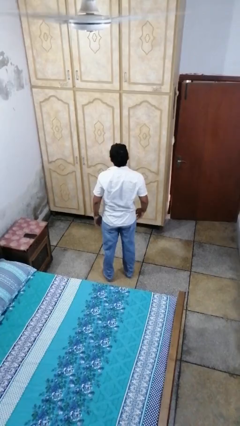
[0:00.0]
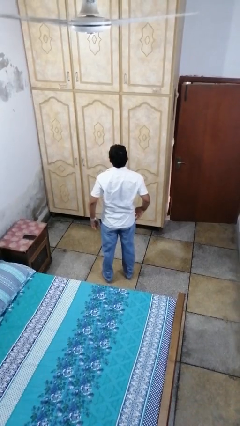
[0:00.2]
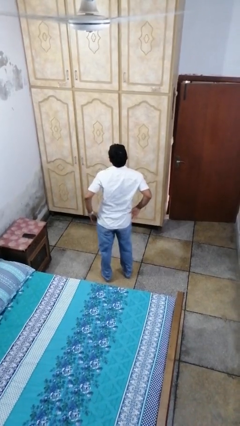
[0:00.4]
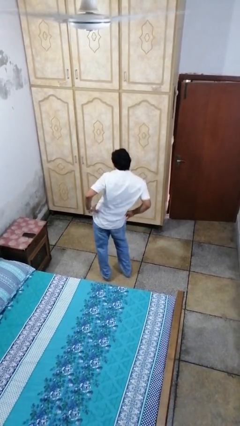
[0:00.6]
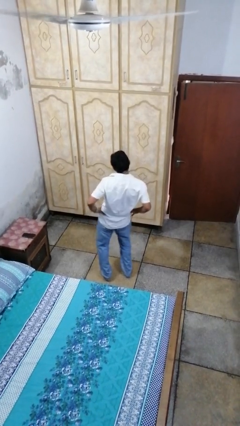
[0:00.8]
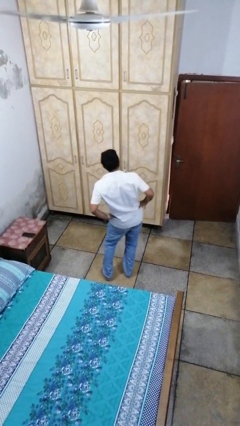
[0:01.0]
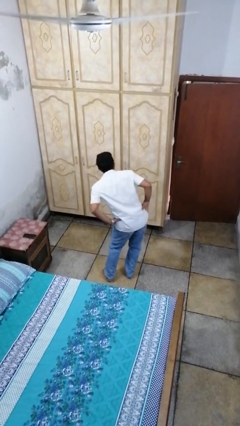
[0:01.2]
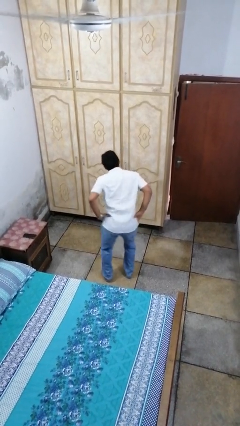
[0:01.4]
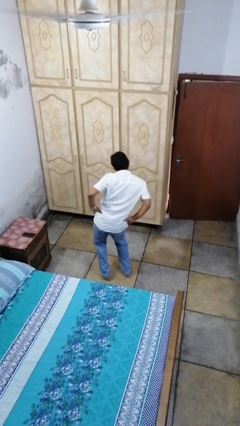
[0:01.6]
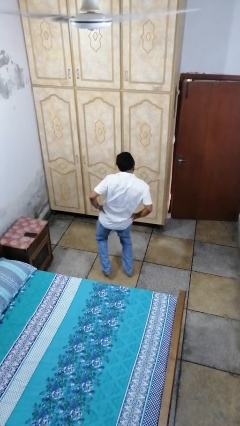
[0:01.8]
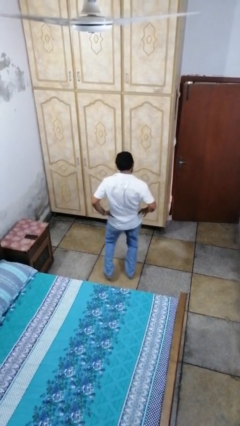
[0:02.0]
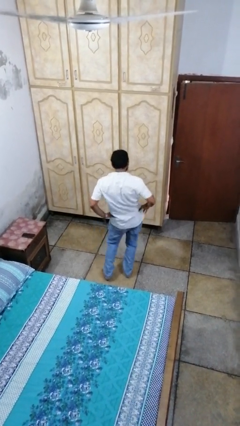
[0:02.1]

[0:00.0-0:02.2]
person wiggles hips

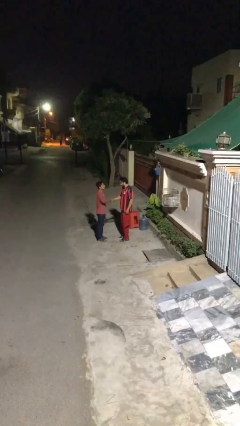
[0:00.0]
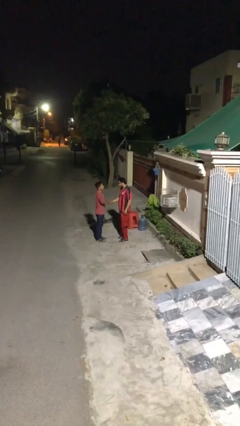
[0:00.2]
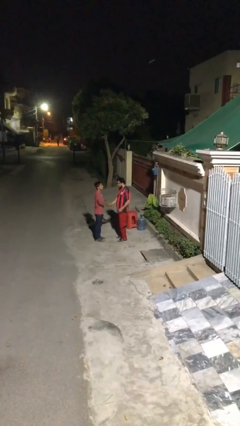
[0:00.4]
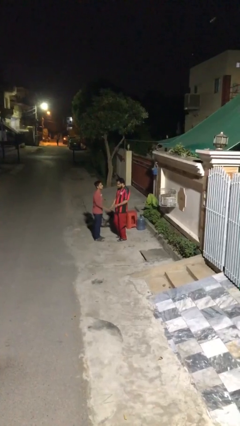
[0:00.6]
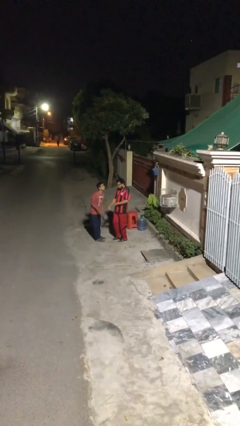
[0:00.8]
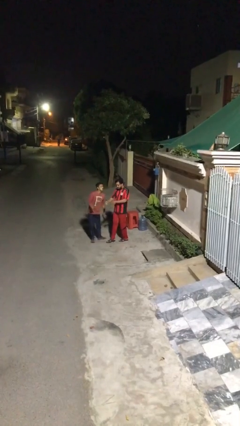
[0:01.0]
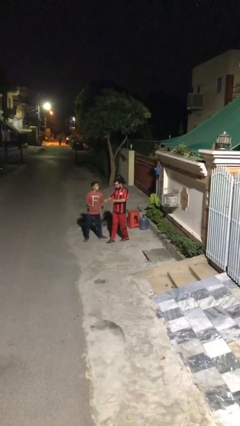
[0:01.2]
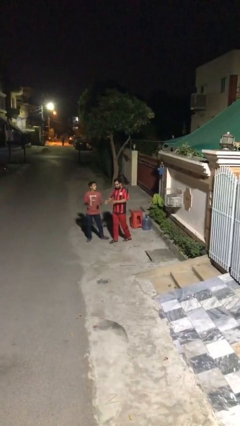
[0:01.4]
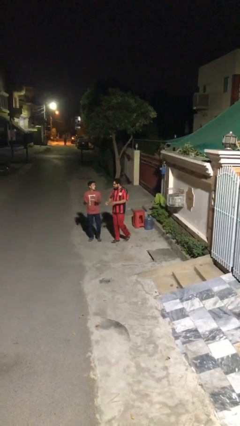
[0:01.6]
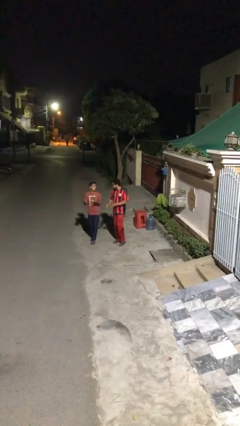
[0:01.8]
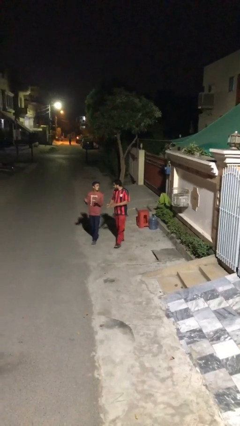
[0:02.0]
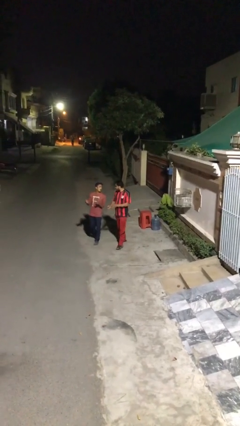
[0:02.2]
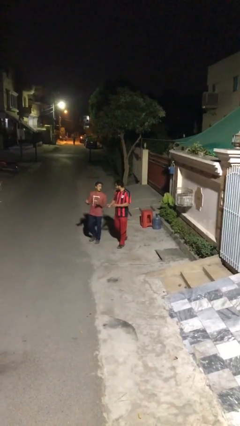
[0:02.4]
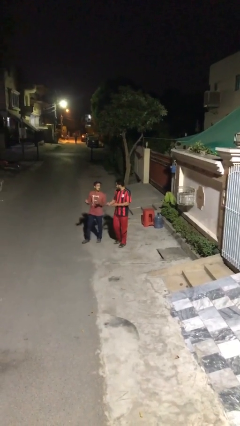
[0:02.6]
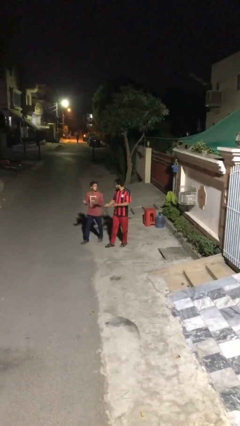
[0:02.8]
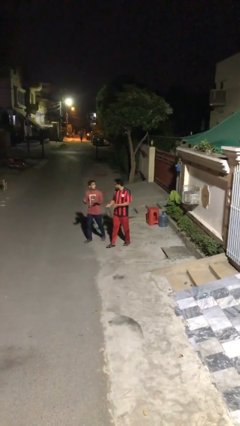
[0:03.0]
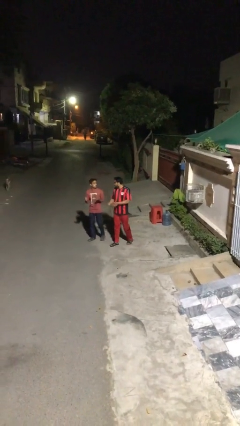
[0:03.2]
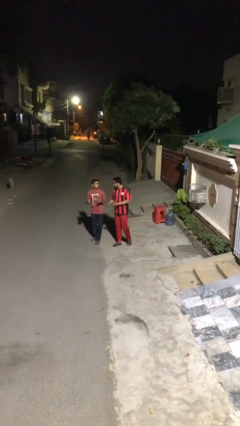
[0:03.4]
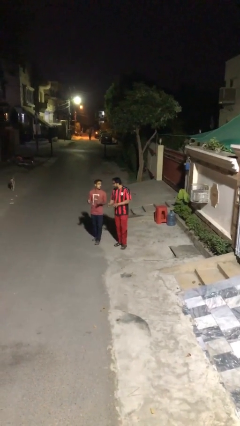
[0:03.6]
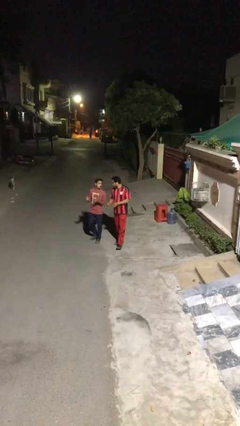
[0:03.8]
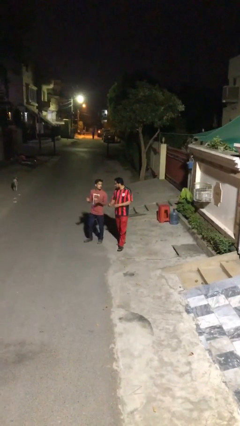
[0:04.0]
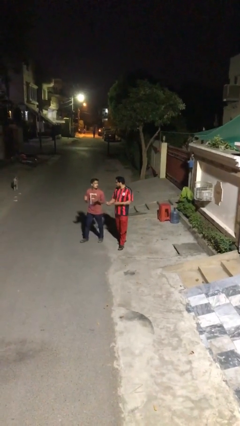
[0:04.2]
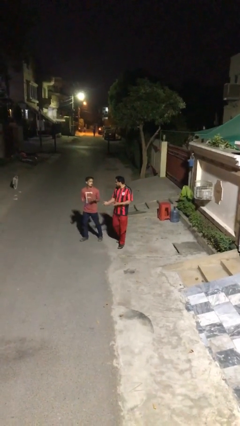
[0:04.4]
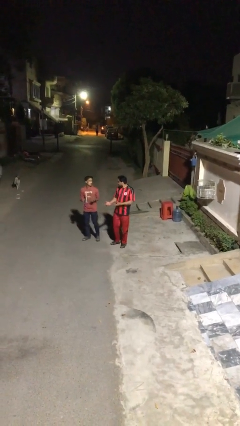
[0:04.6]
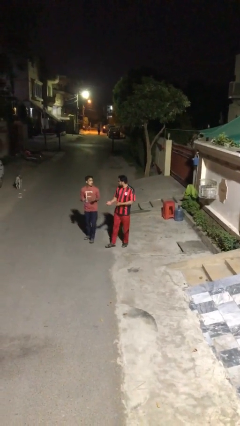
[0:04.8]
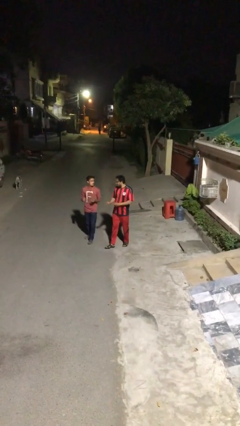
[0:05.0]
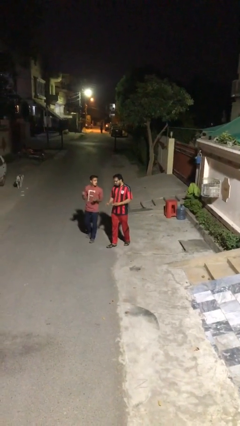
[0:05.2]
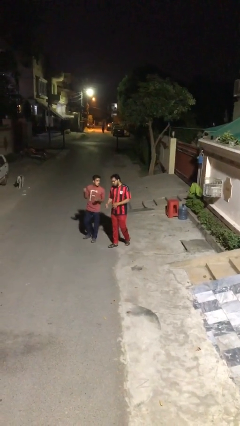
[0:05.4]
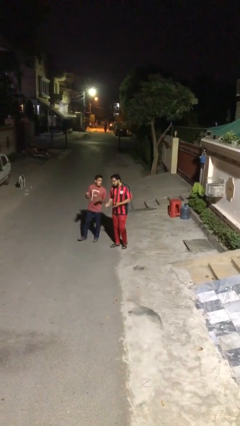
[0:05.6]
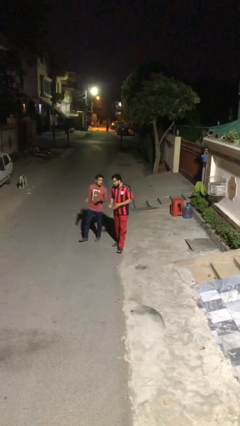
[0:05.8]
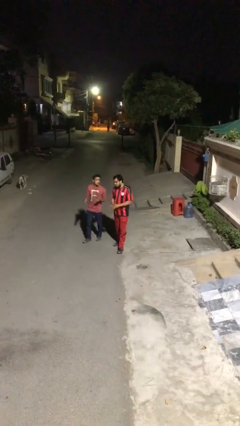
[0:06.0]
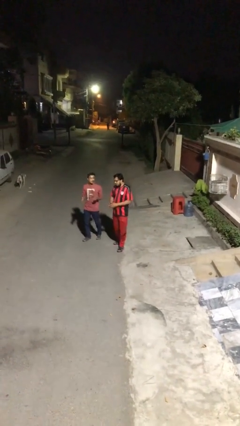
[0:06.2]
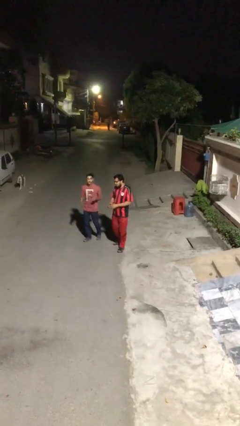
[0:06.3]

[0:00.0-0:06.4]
person talks to person

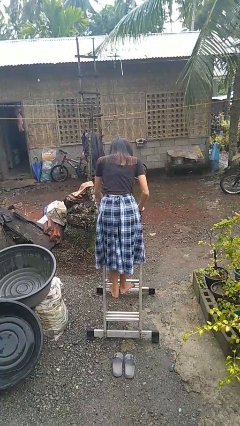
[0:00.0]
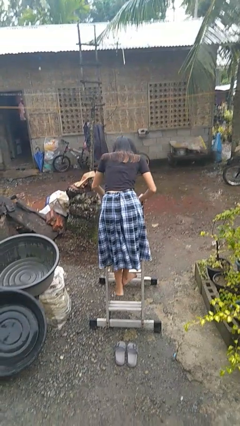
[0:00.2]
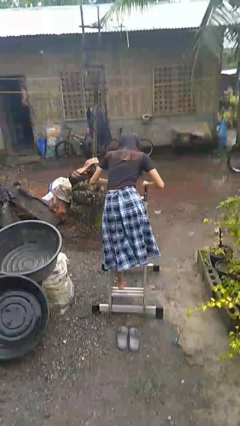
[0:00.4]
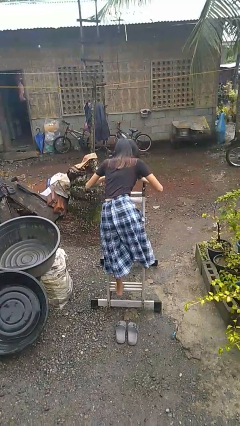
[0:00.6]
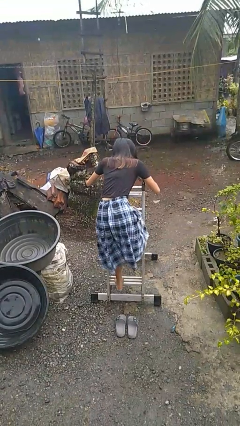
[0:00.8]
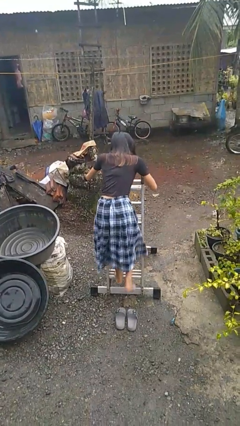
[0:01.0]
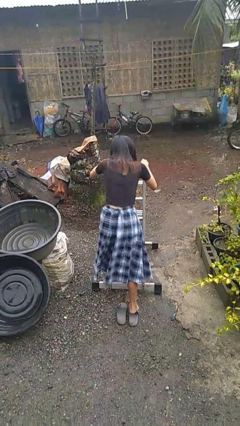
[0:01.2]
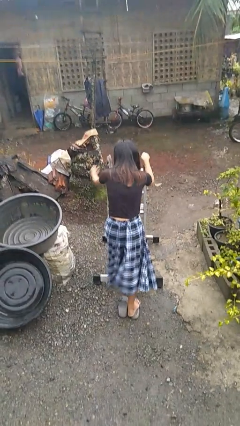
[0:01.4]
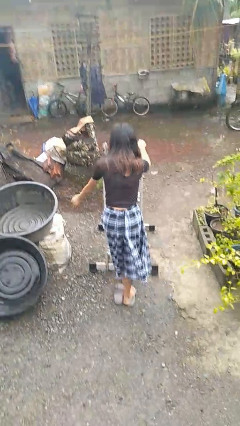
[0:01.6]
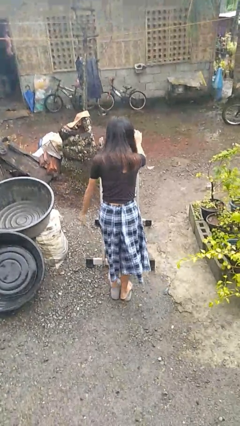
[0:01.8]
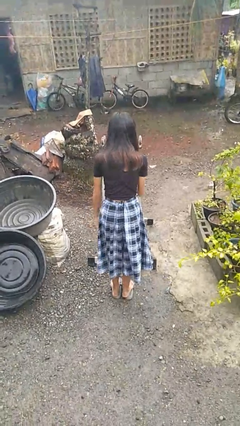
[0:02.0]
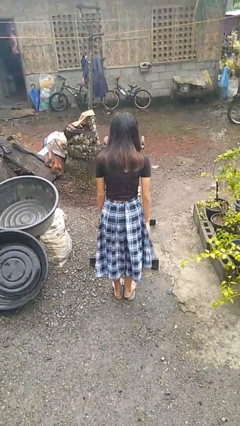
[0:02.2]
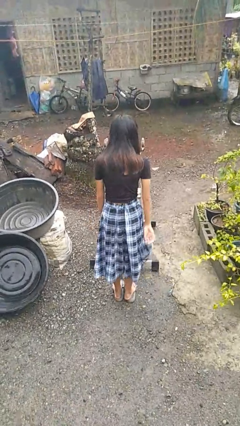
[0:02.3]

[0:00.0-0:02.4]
person climbs down ladder

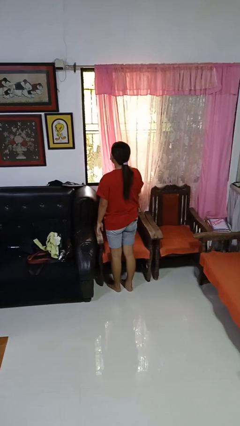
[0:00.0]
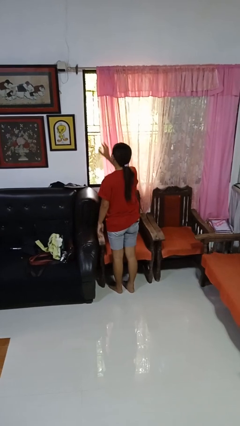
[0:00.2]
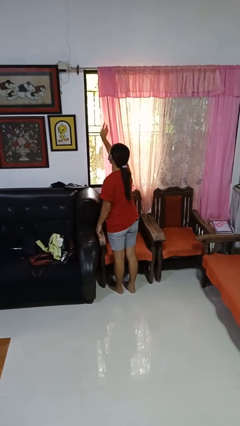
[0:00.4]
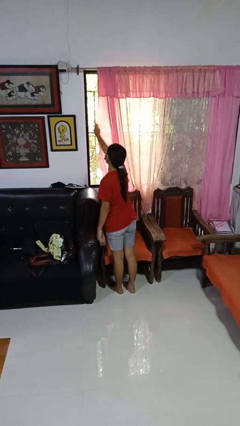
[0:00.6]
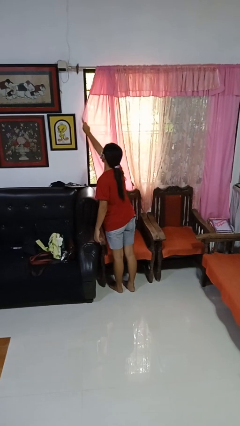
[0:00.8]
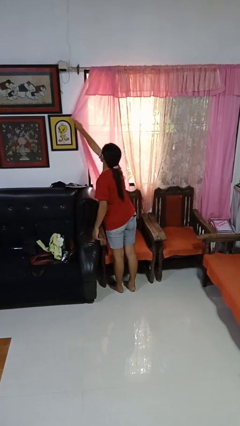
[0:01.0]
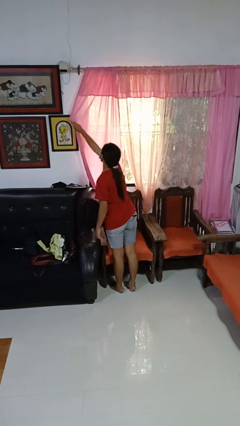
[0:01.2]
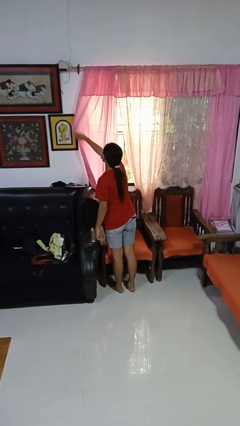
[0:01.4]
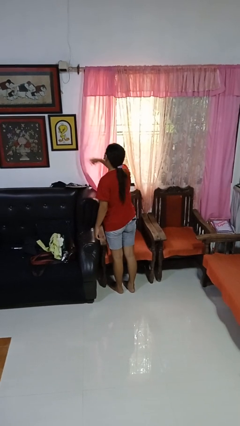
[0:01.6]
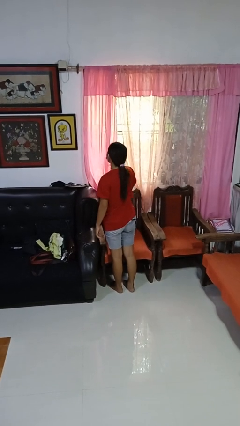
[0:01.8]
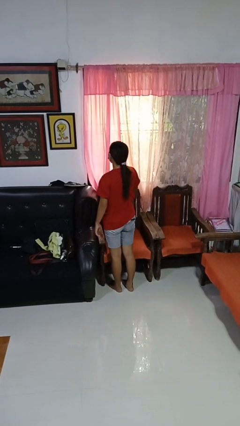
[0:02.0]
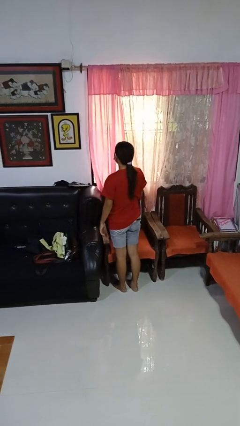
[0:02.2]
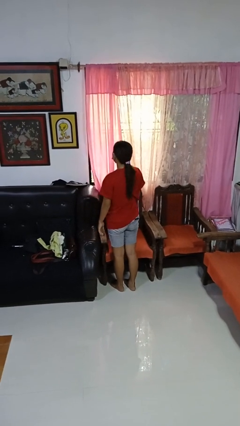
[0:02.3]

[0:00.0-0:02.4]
person closes curtains

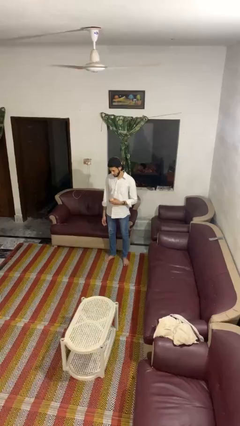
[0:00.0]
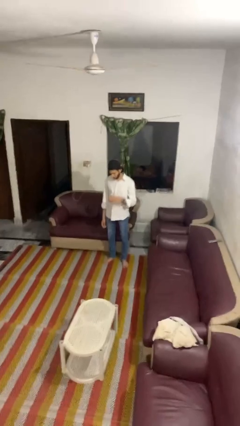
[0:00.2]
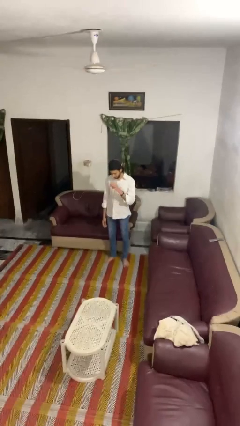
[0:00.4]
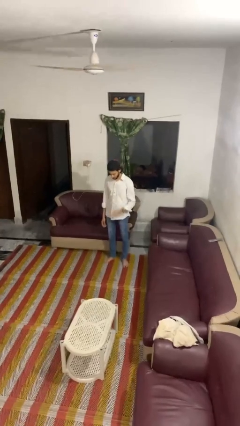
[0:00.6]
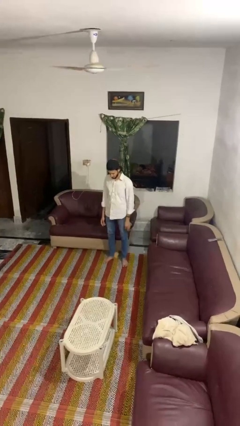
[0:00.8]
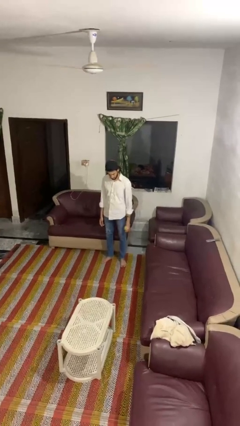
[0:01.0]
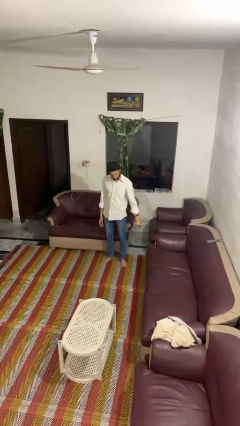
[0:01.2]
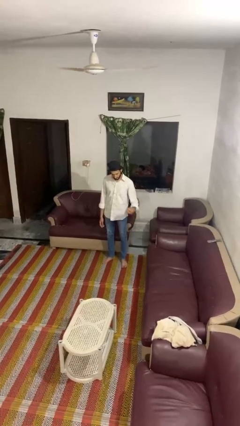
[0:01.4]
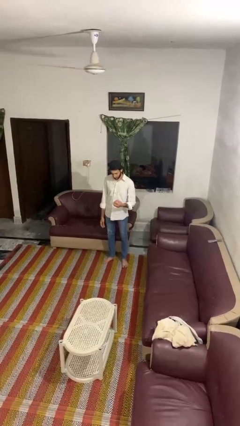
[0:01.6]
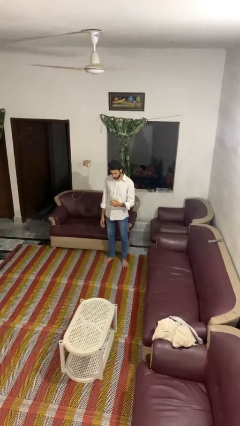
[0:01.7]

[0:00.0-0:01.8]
person bounces ball on floor

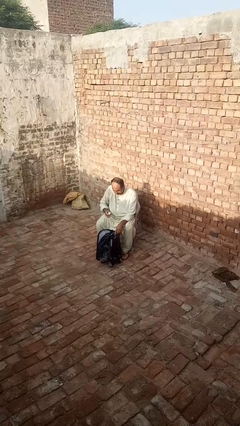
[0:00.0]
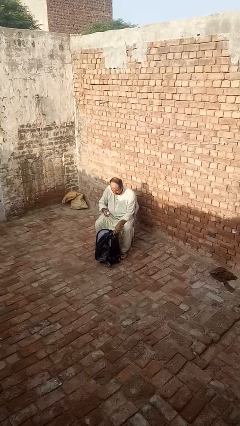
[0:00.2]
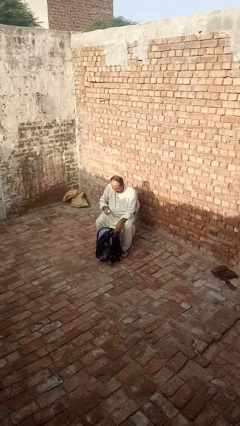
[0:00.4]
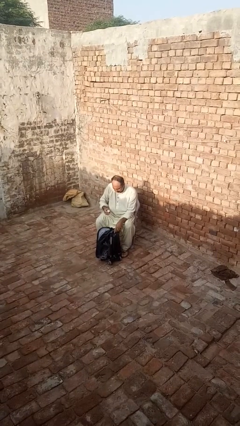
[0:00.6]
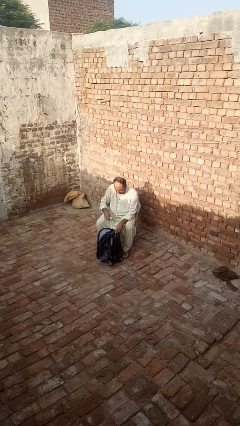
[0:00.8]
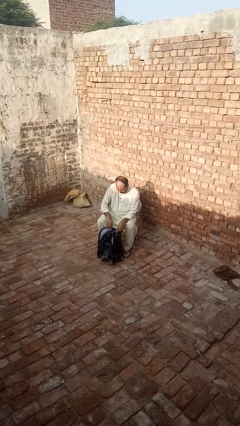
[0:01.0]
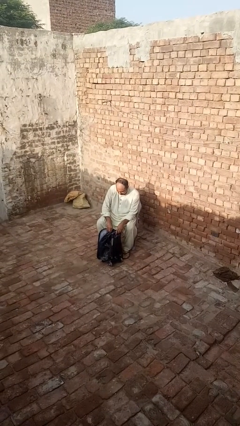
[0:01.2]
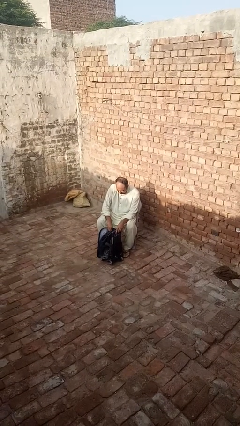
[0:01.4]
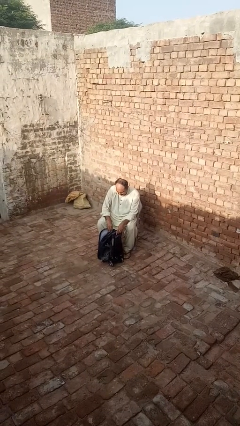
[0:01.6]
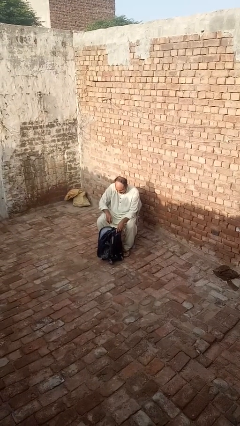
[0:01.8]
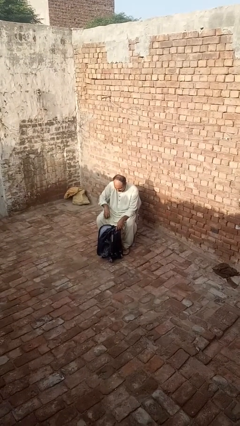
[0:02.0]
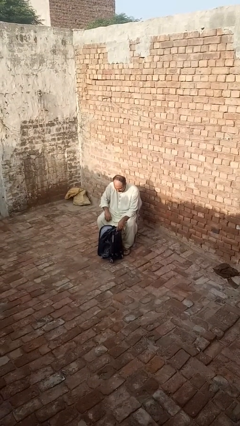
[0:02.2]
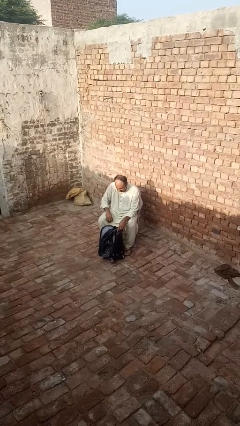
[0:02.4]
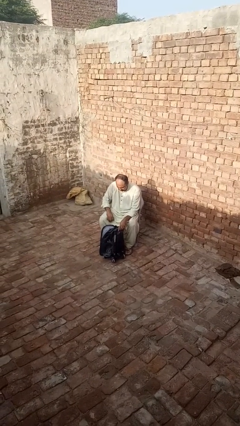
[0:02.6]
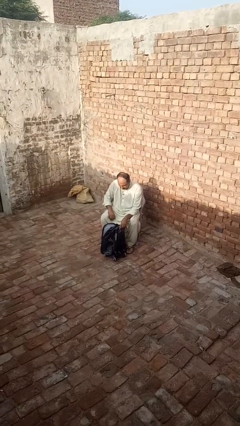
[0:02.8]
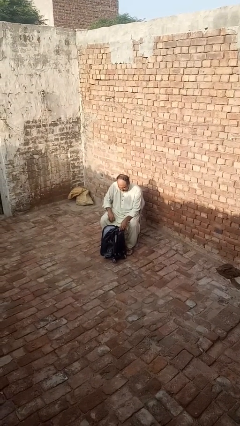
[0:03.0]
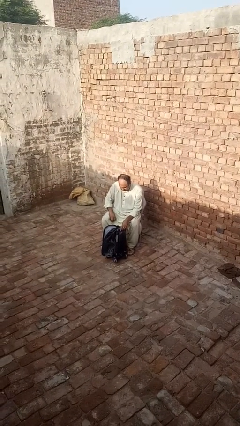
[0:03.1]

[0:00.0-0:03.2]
person puts object into backpack
